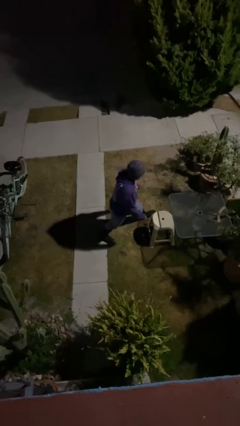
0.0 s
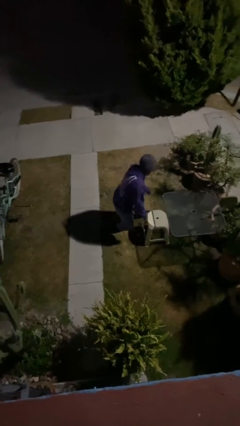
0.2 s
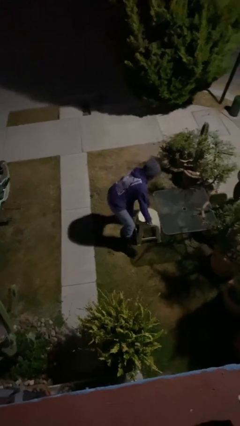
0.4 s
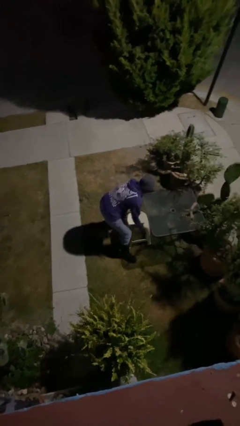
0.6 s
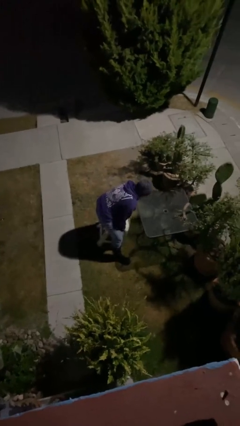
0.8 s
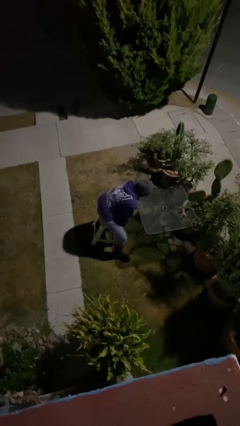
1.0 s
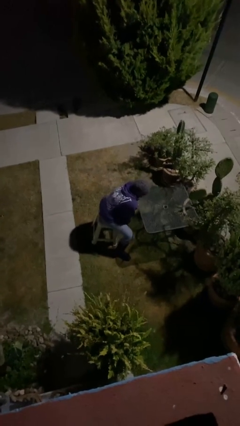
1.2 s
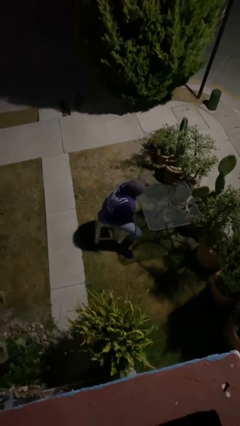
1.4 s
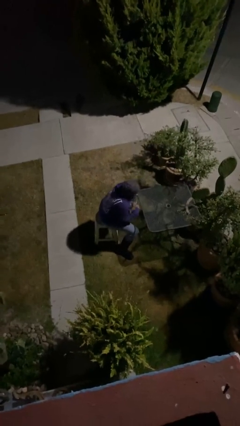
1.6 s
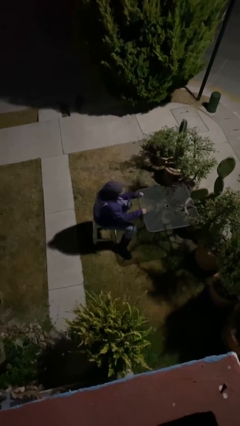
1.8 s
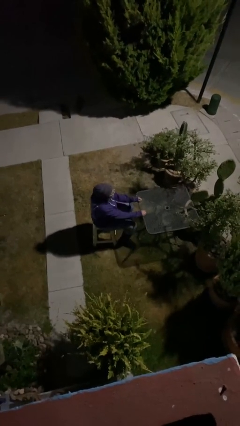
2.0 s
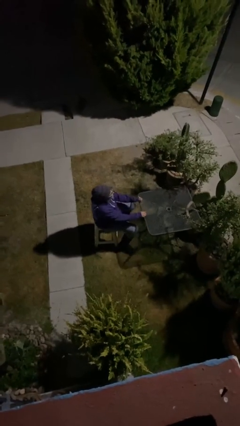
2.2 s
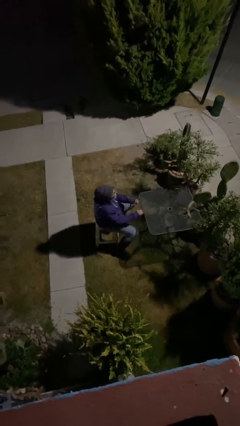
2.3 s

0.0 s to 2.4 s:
person sits down

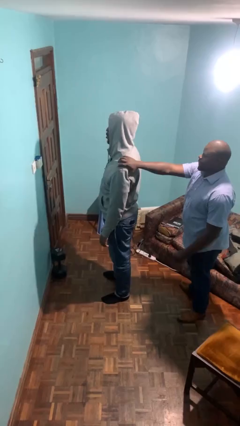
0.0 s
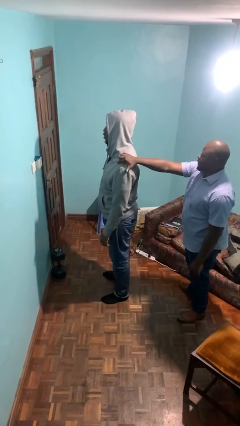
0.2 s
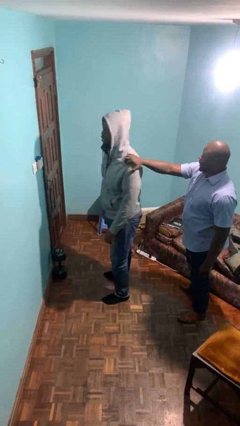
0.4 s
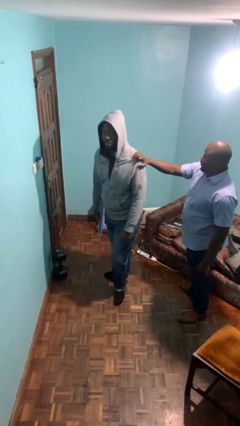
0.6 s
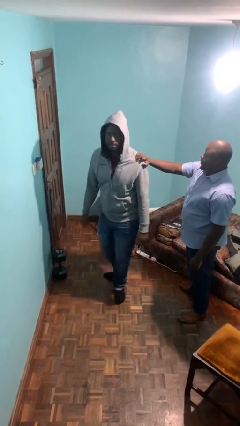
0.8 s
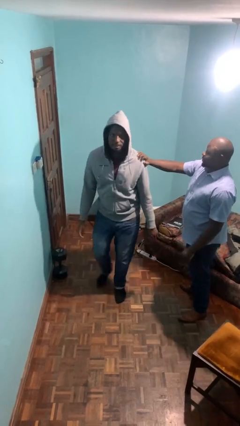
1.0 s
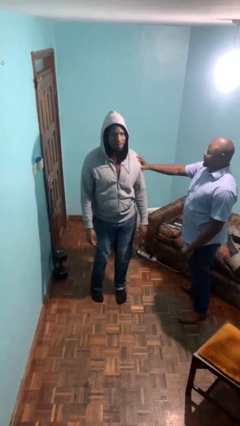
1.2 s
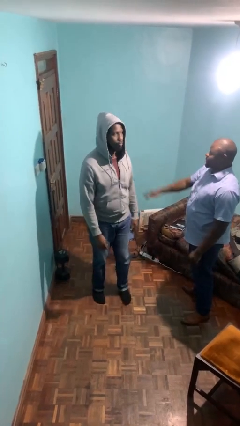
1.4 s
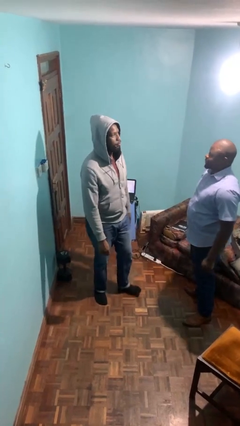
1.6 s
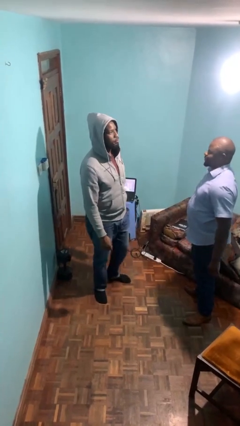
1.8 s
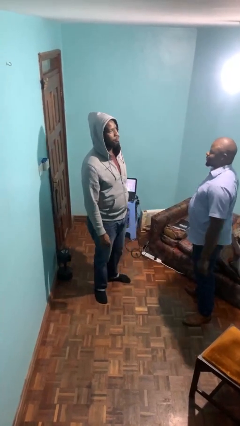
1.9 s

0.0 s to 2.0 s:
person spins person around

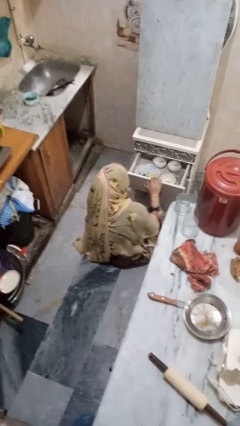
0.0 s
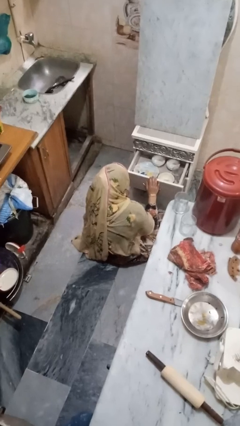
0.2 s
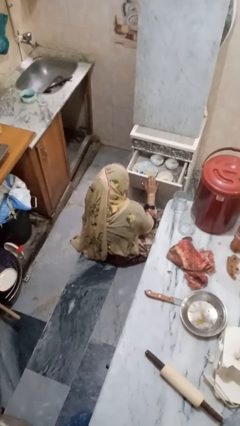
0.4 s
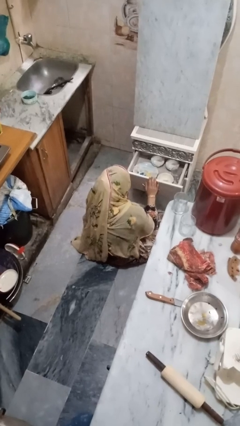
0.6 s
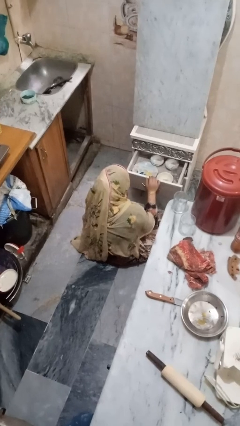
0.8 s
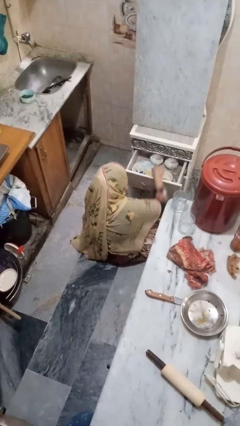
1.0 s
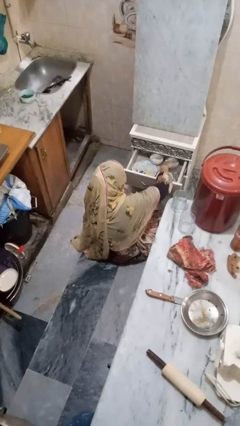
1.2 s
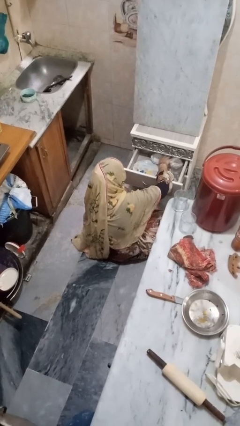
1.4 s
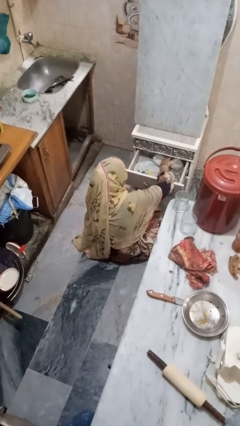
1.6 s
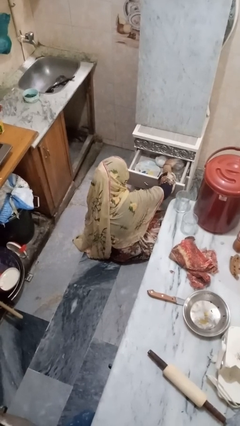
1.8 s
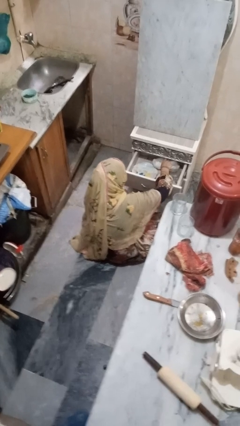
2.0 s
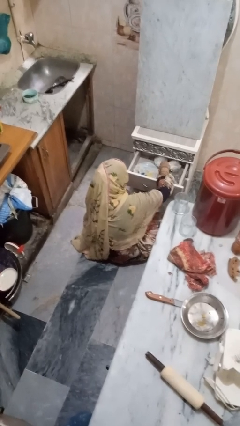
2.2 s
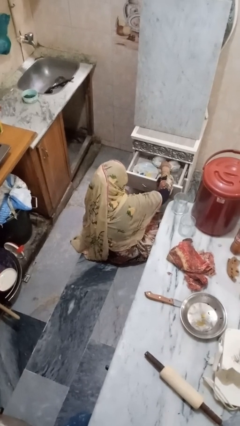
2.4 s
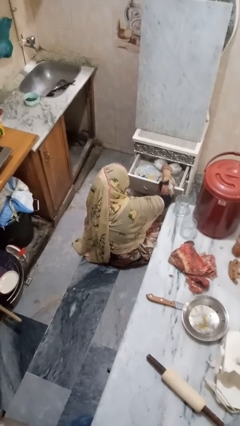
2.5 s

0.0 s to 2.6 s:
person searches in kitchen drawer

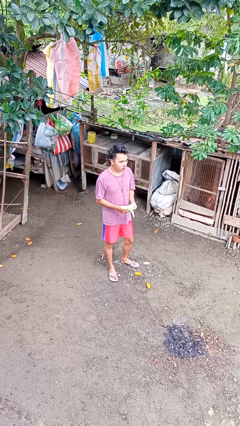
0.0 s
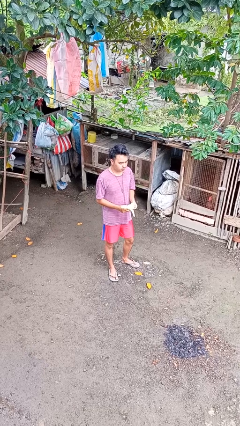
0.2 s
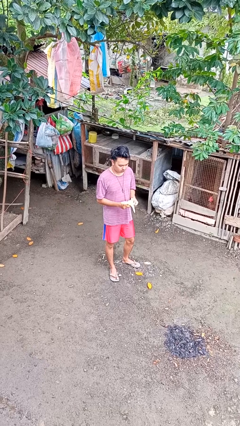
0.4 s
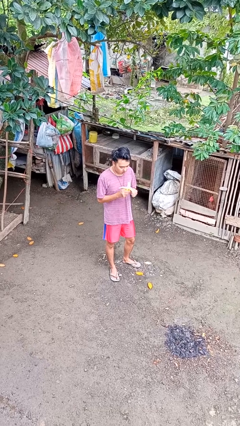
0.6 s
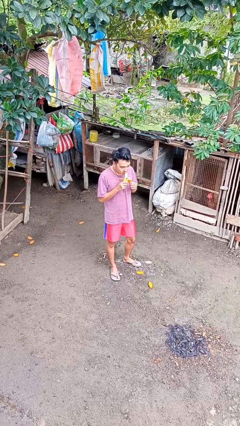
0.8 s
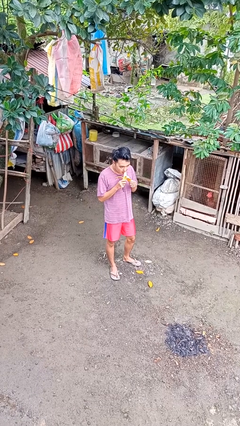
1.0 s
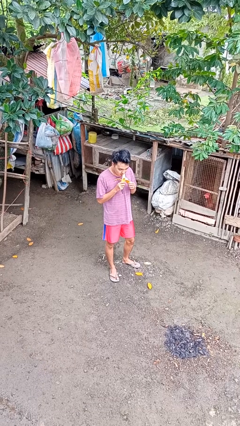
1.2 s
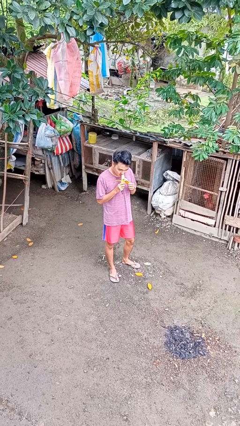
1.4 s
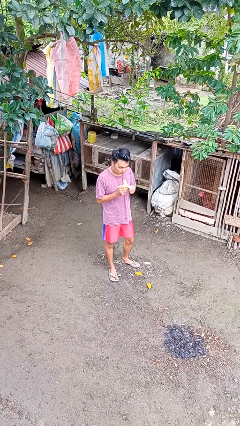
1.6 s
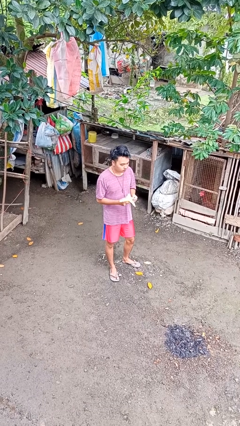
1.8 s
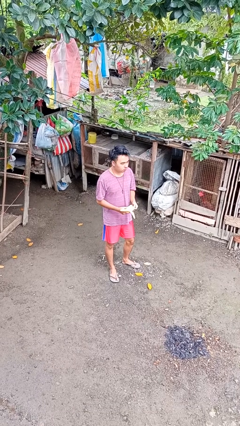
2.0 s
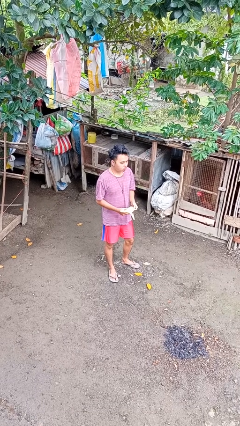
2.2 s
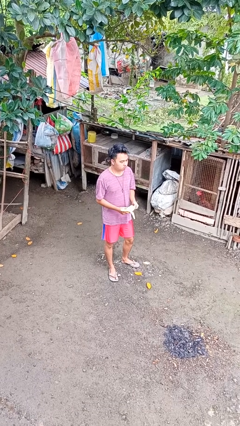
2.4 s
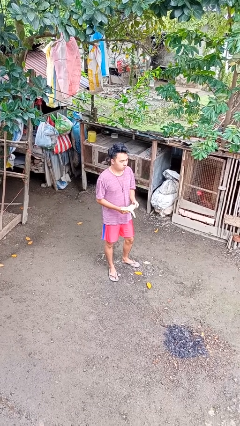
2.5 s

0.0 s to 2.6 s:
person eats banana

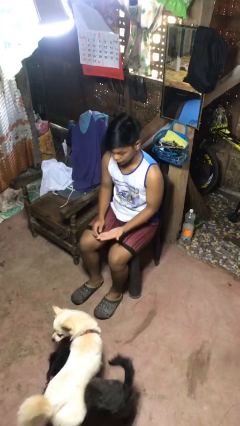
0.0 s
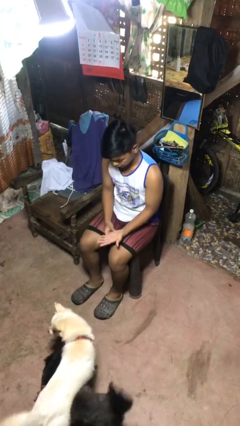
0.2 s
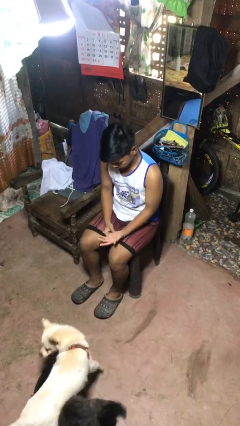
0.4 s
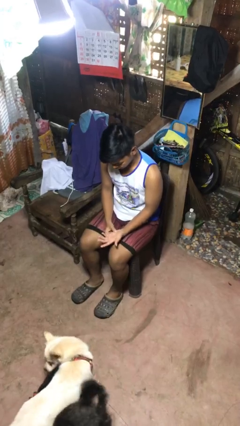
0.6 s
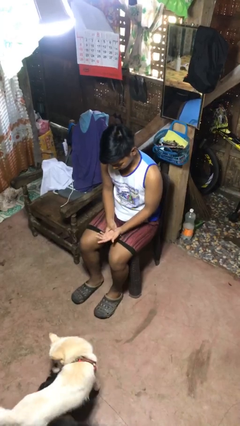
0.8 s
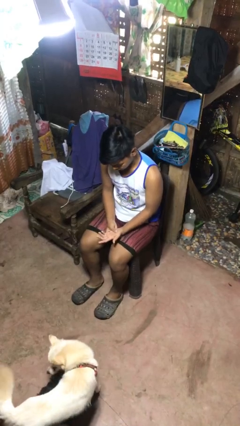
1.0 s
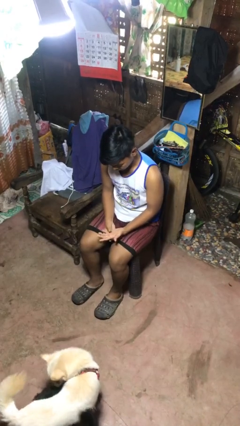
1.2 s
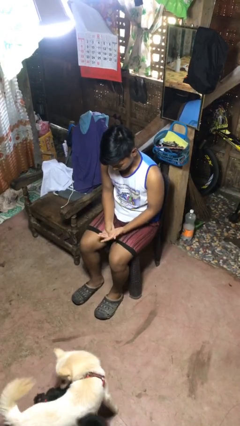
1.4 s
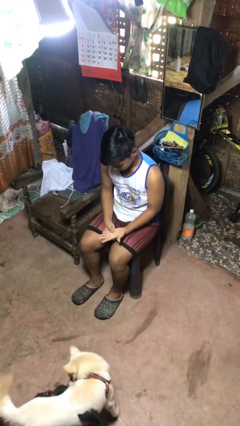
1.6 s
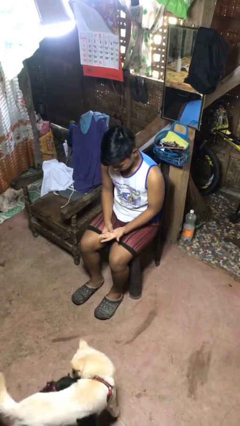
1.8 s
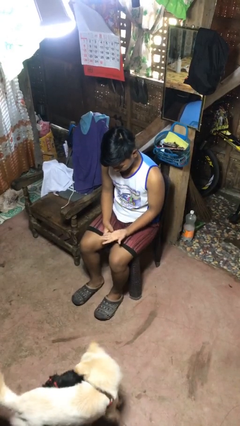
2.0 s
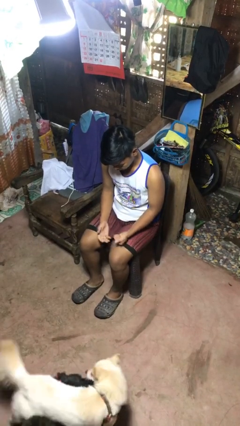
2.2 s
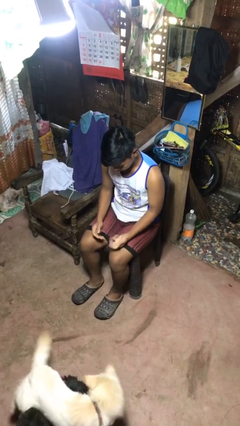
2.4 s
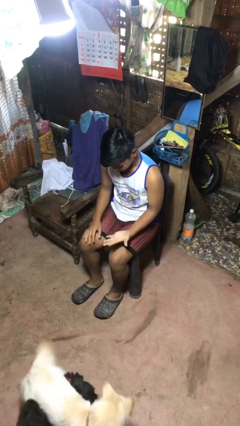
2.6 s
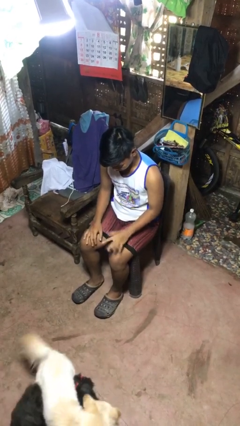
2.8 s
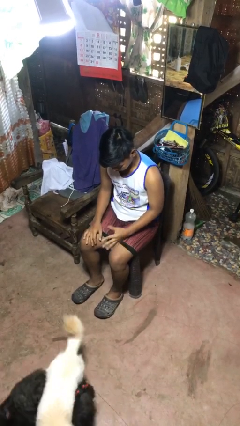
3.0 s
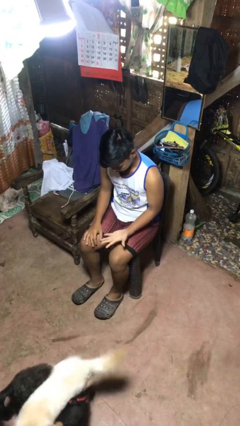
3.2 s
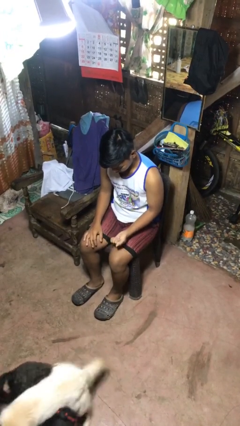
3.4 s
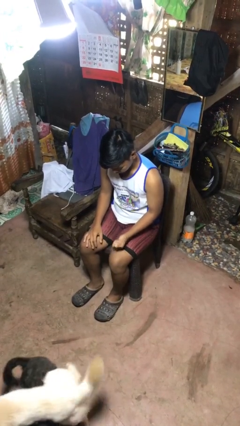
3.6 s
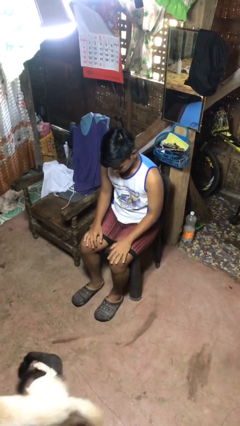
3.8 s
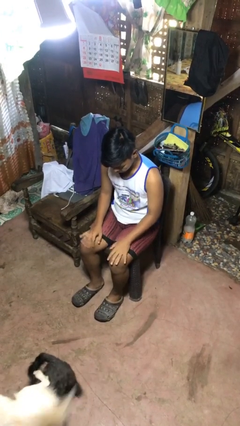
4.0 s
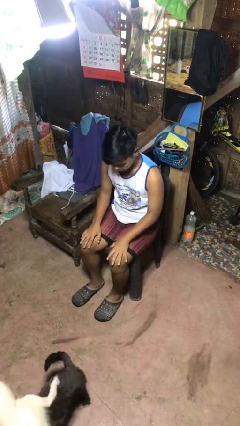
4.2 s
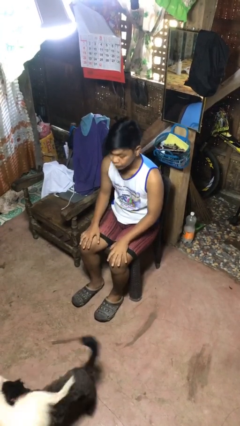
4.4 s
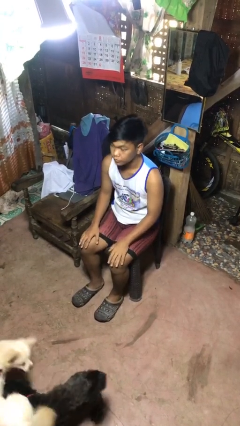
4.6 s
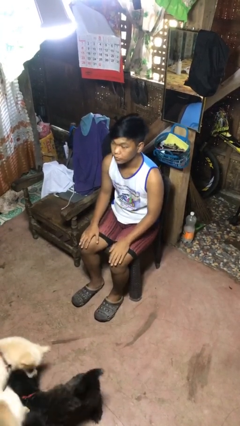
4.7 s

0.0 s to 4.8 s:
person looks at hands in lap

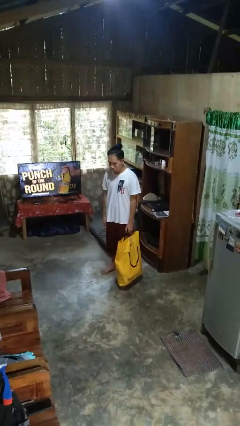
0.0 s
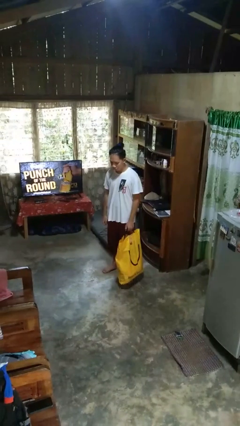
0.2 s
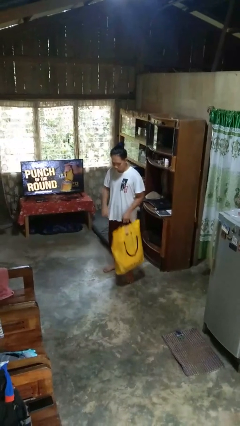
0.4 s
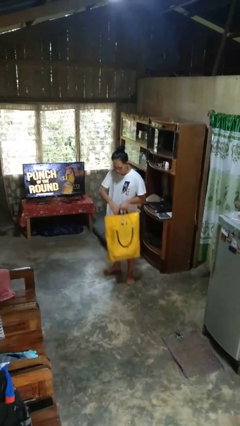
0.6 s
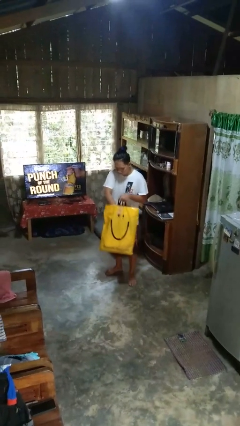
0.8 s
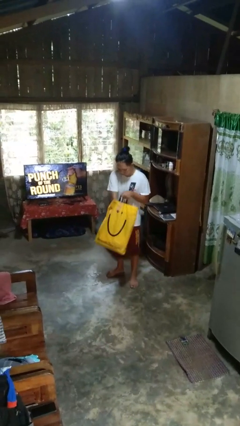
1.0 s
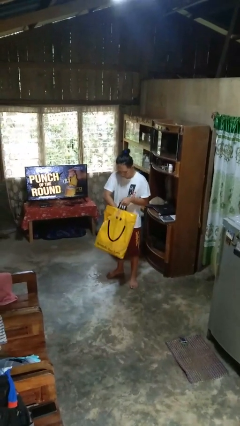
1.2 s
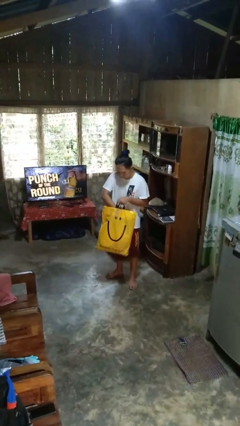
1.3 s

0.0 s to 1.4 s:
person searches in bag

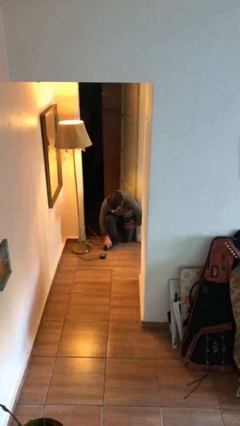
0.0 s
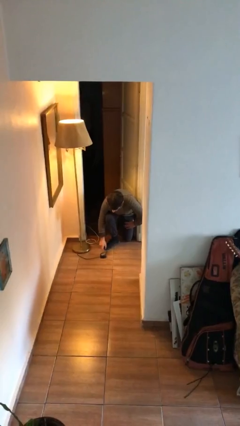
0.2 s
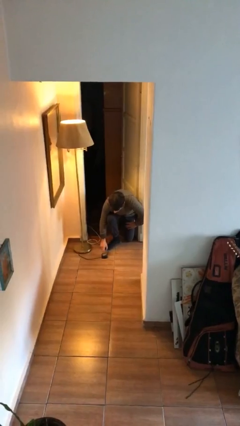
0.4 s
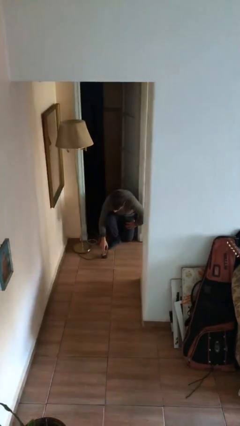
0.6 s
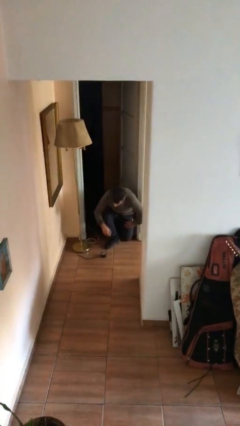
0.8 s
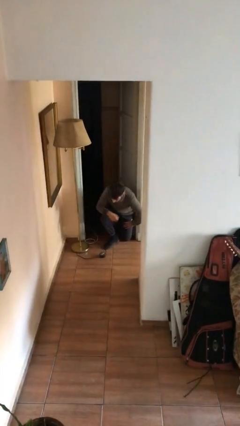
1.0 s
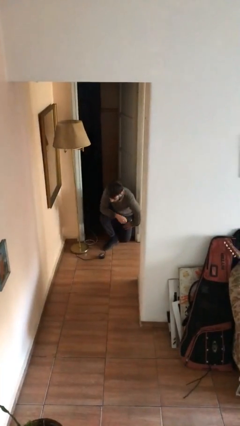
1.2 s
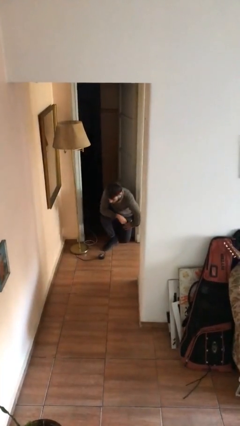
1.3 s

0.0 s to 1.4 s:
person turns off lamp
